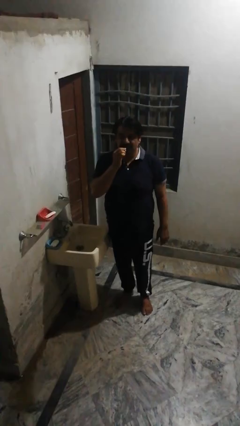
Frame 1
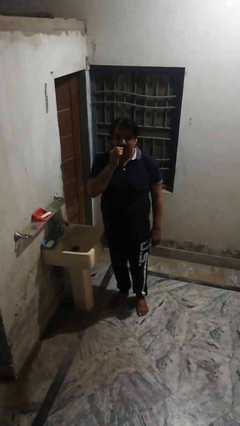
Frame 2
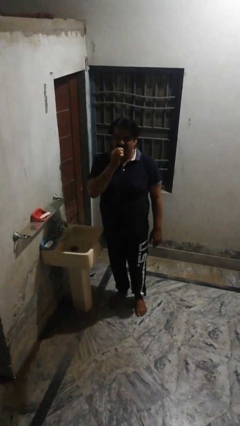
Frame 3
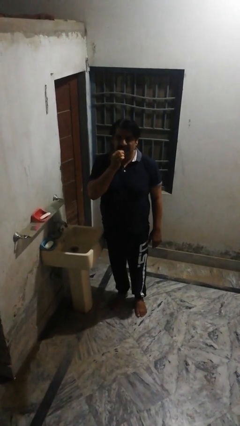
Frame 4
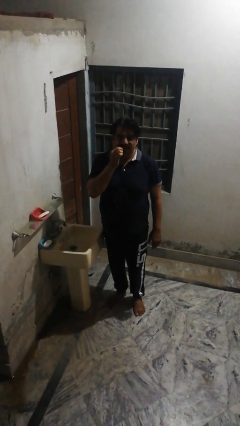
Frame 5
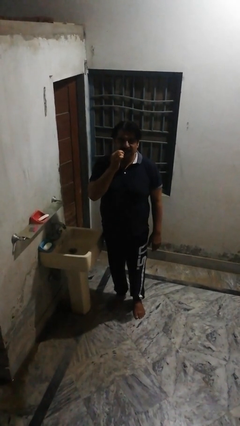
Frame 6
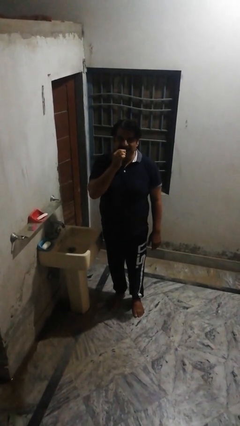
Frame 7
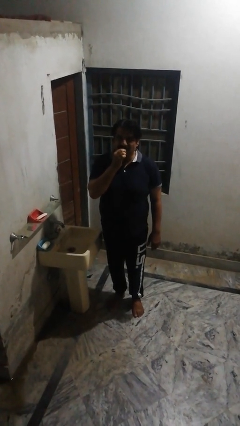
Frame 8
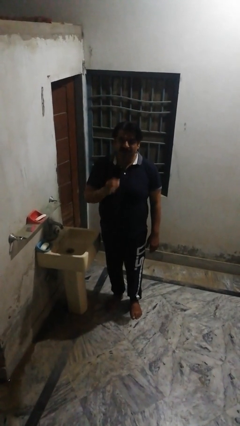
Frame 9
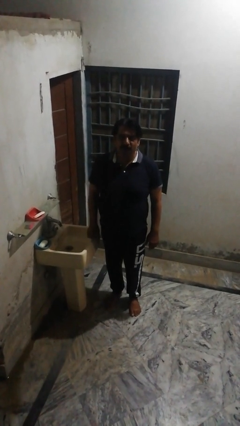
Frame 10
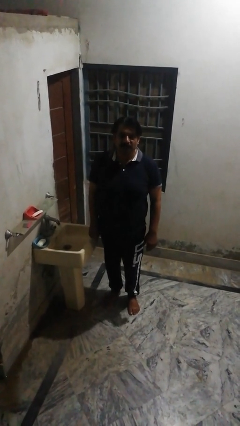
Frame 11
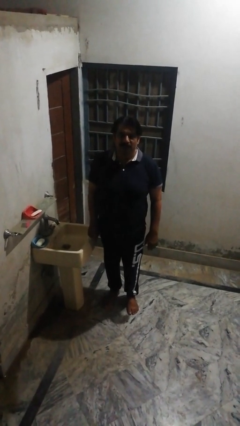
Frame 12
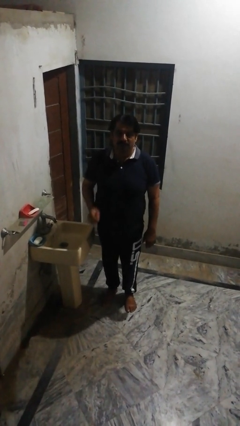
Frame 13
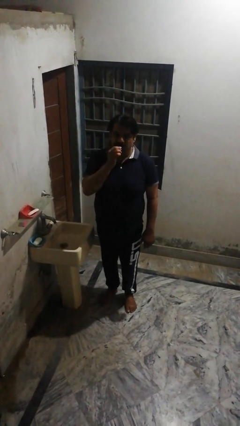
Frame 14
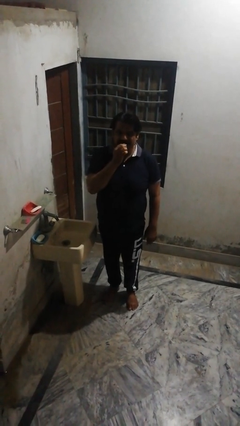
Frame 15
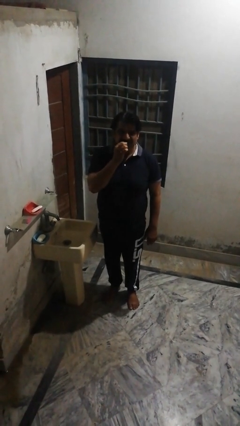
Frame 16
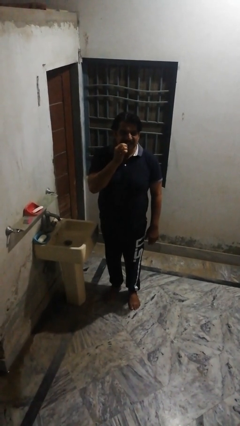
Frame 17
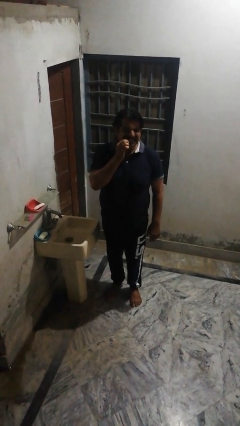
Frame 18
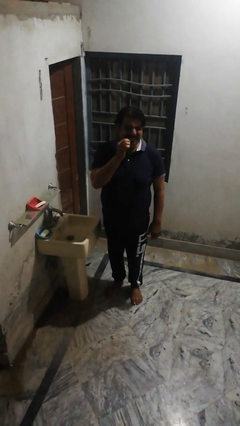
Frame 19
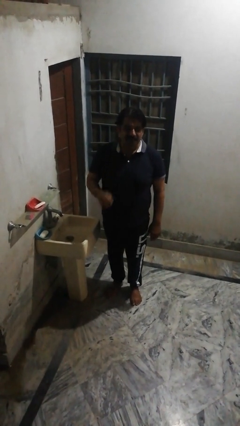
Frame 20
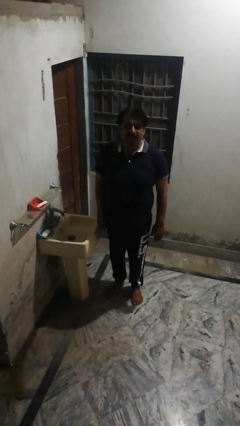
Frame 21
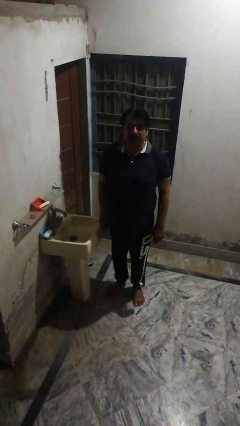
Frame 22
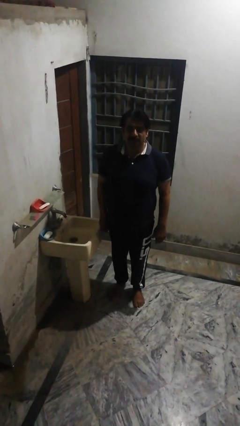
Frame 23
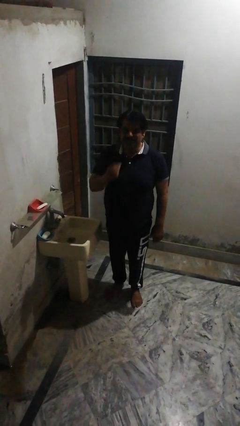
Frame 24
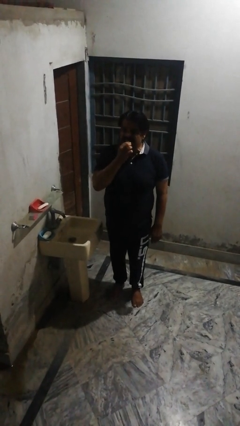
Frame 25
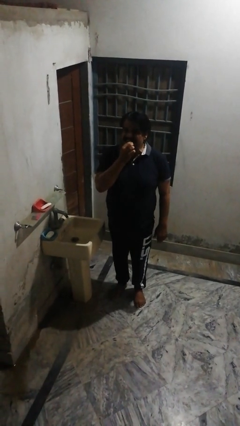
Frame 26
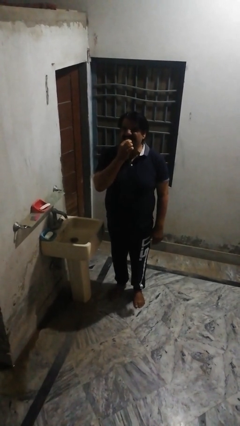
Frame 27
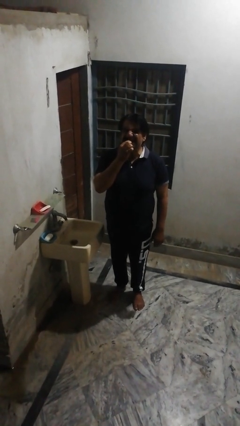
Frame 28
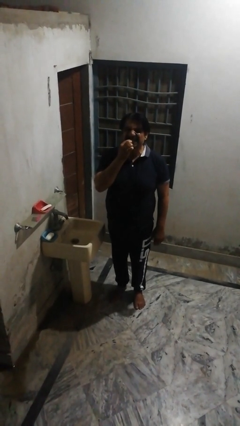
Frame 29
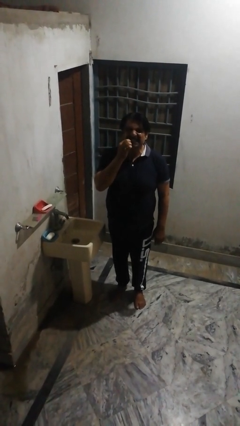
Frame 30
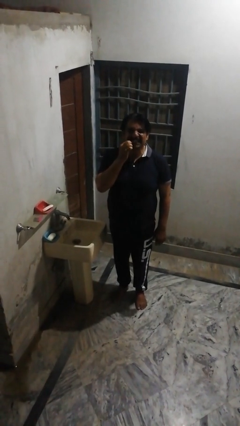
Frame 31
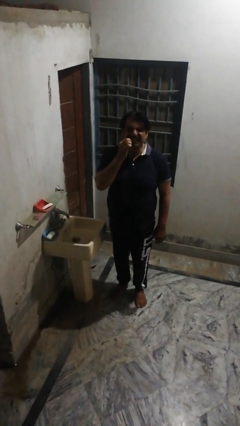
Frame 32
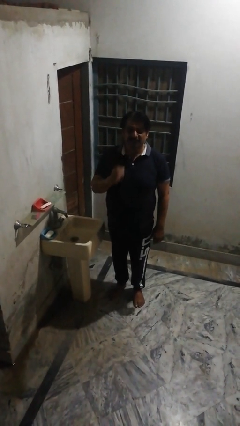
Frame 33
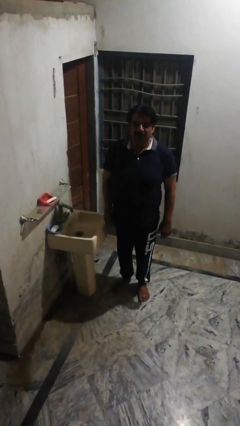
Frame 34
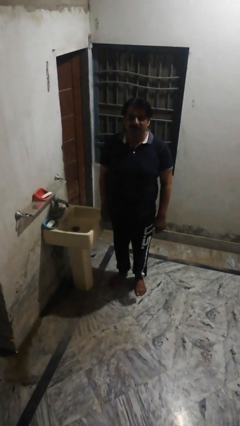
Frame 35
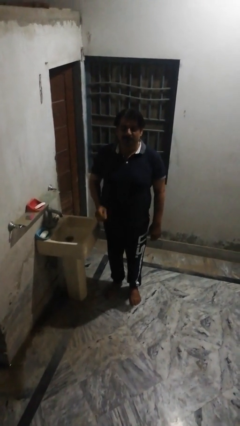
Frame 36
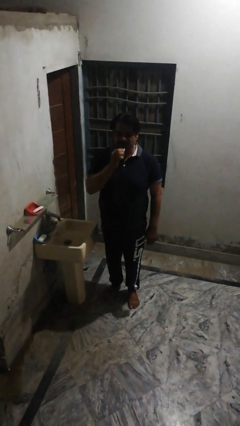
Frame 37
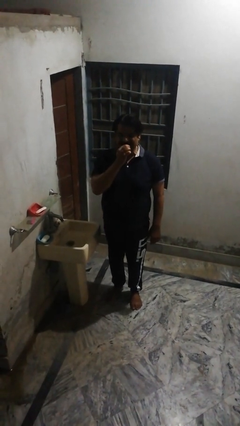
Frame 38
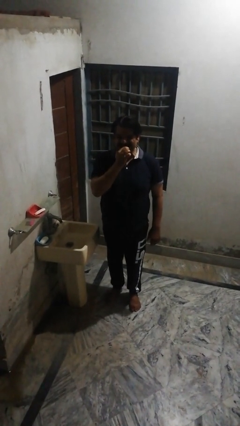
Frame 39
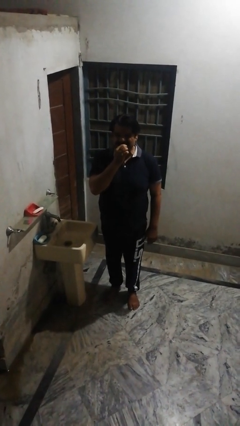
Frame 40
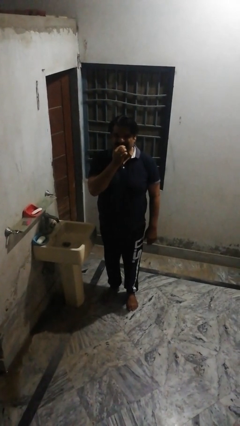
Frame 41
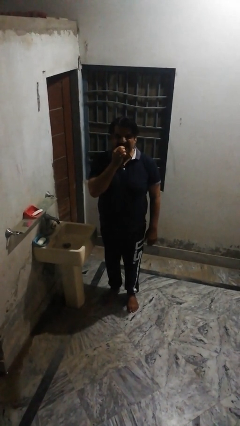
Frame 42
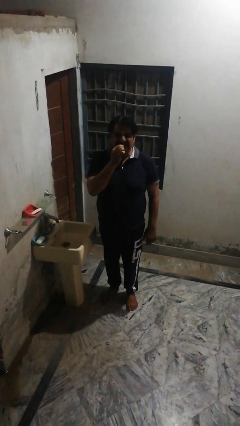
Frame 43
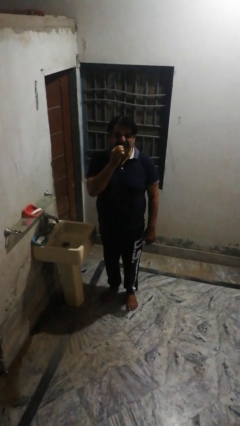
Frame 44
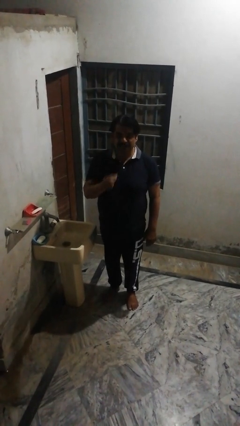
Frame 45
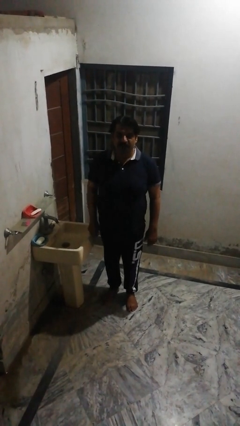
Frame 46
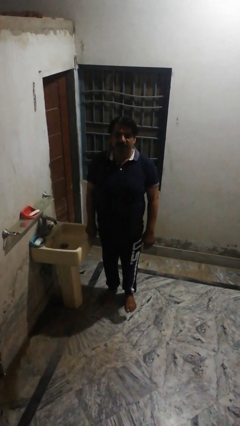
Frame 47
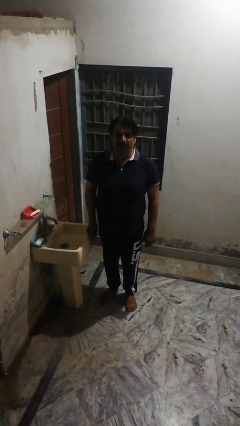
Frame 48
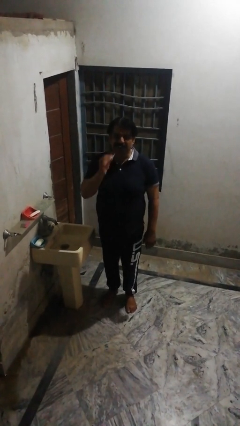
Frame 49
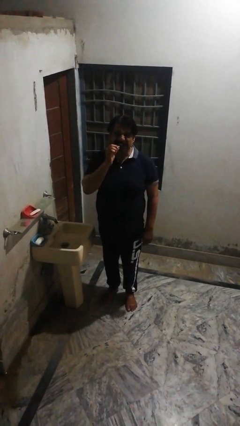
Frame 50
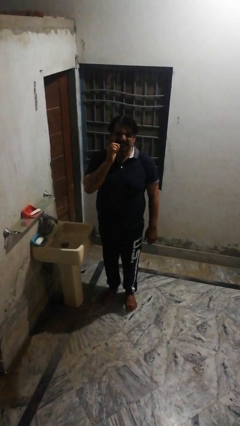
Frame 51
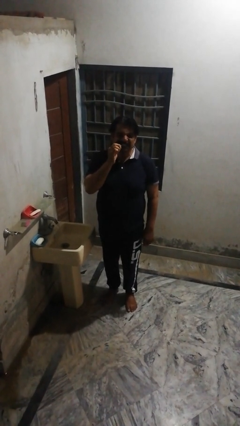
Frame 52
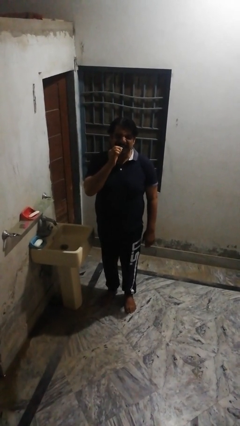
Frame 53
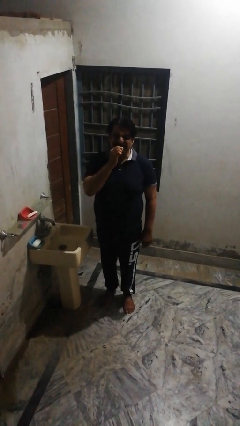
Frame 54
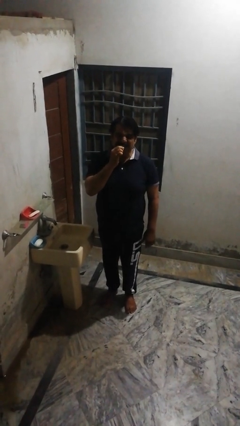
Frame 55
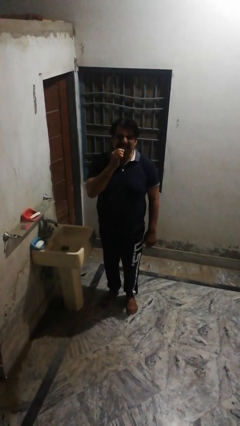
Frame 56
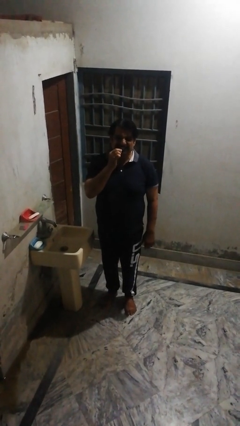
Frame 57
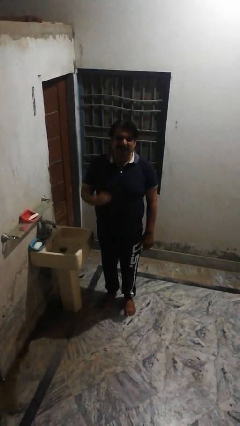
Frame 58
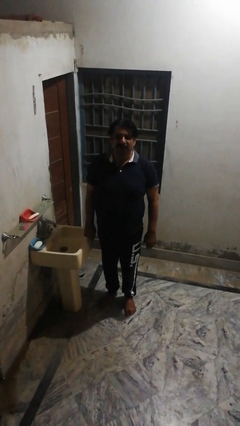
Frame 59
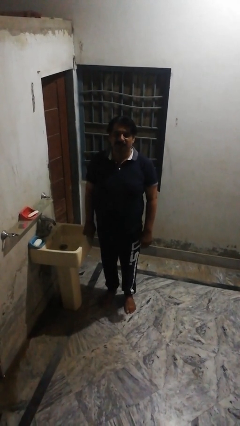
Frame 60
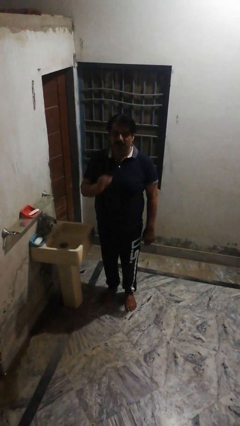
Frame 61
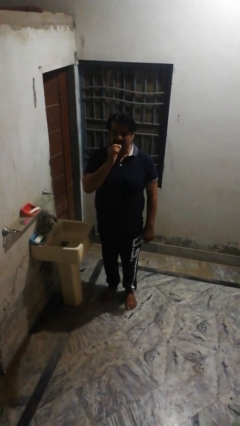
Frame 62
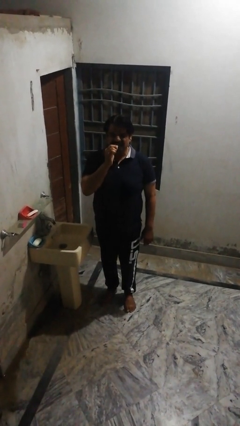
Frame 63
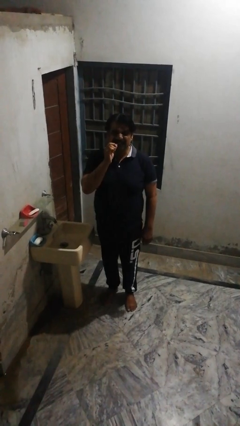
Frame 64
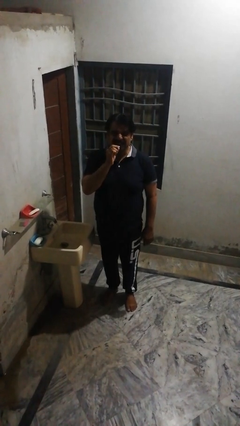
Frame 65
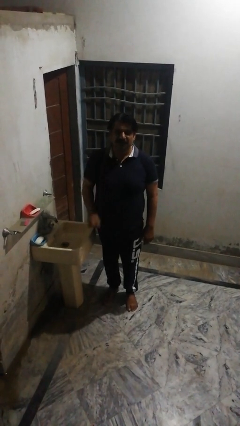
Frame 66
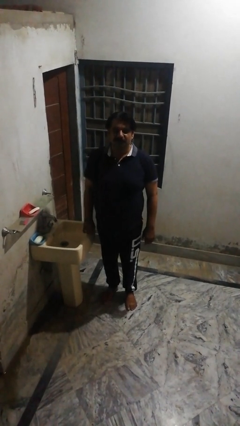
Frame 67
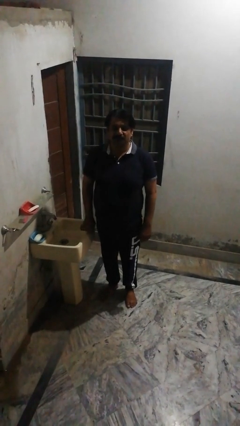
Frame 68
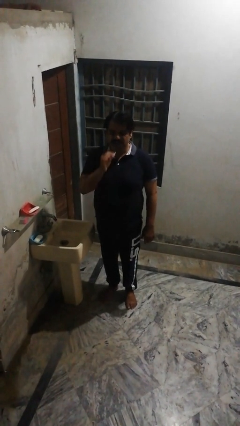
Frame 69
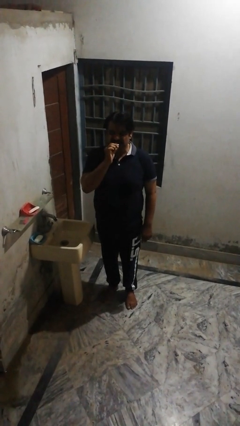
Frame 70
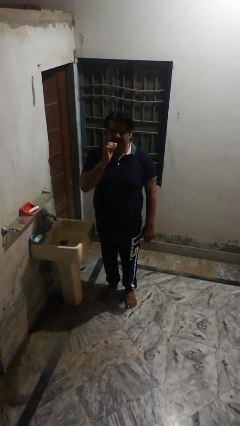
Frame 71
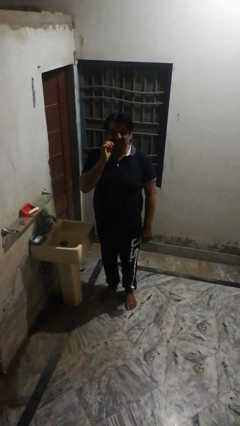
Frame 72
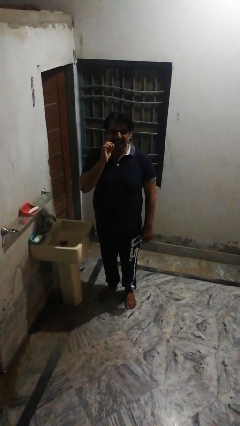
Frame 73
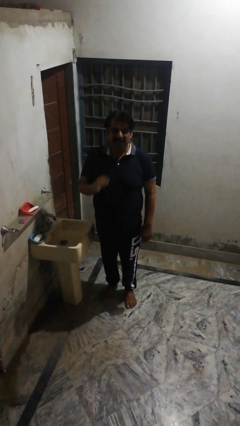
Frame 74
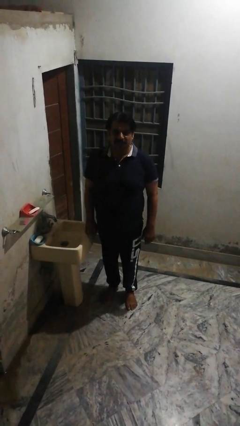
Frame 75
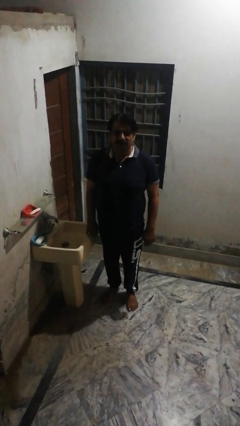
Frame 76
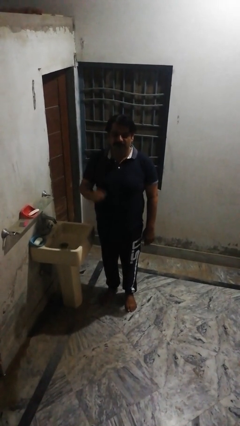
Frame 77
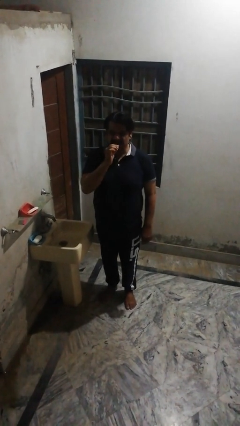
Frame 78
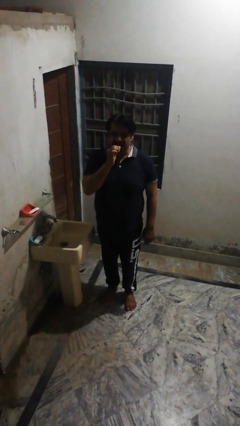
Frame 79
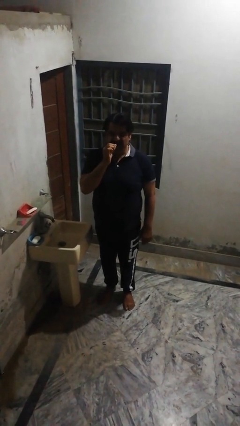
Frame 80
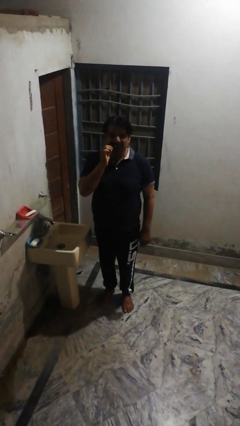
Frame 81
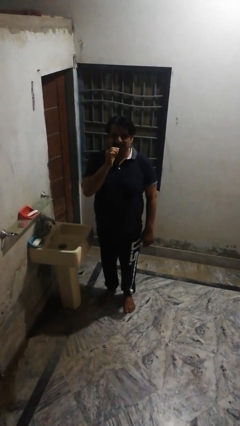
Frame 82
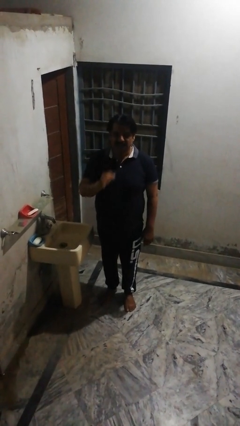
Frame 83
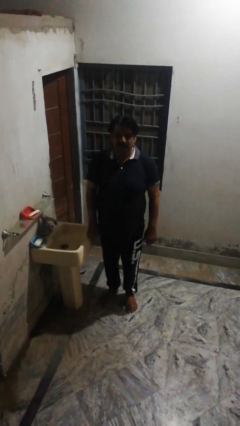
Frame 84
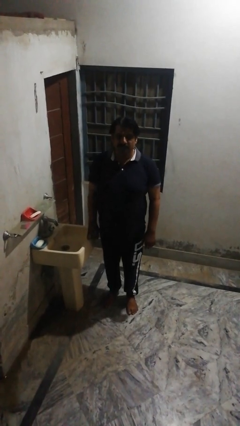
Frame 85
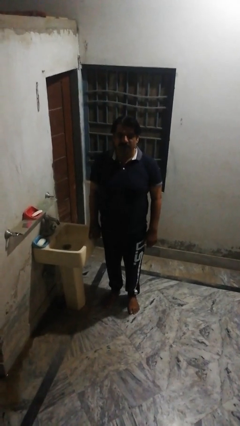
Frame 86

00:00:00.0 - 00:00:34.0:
person flosses

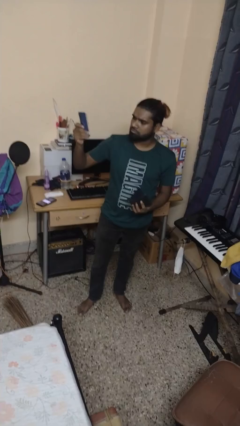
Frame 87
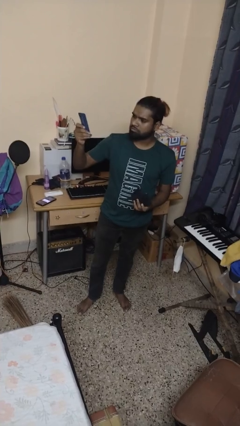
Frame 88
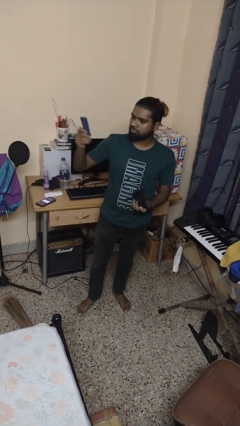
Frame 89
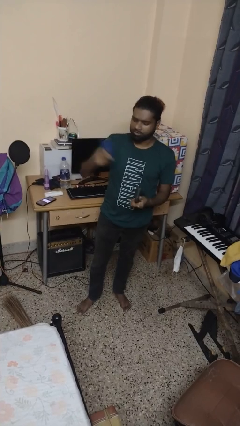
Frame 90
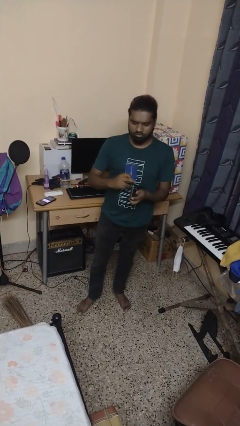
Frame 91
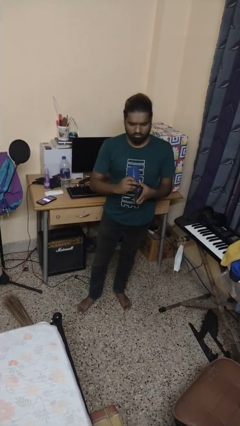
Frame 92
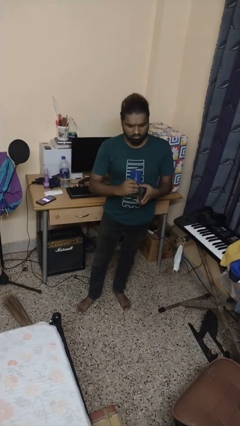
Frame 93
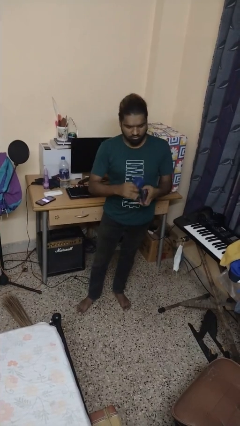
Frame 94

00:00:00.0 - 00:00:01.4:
person takes object from purse
